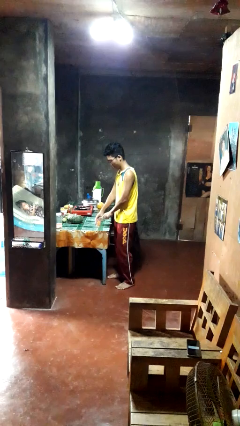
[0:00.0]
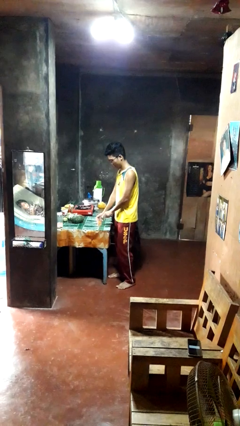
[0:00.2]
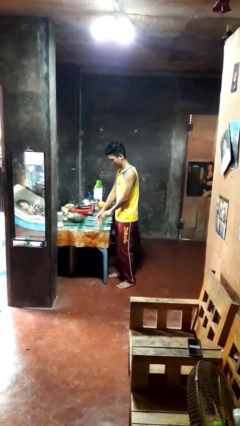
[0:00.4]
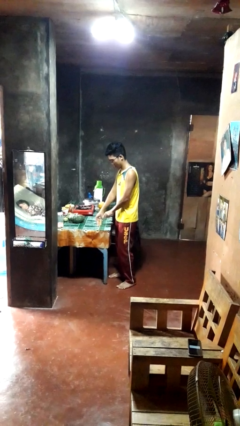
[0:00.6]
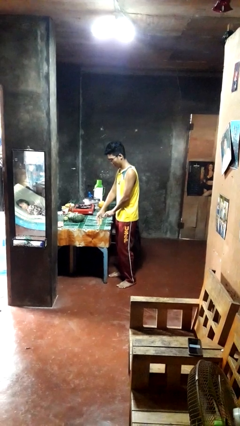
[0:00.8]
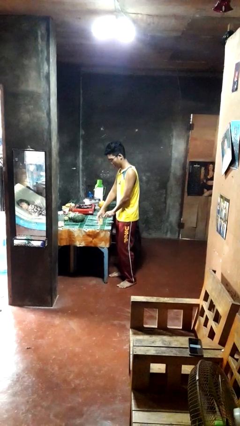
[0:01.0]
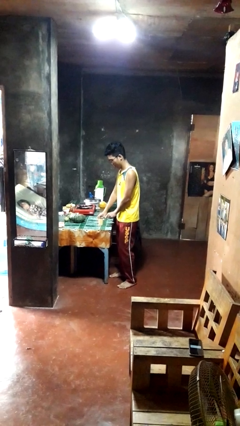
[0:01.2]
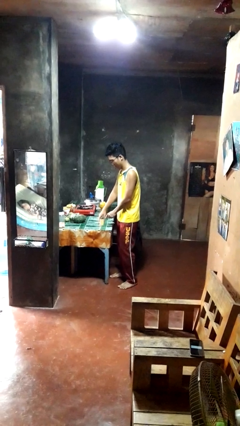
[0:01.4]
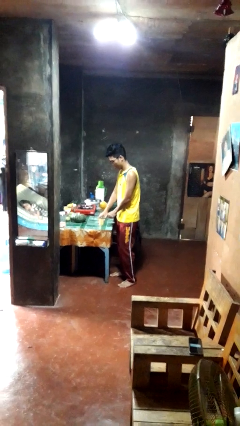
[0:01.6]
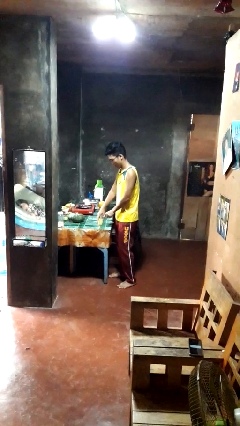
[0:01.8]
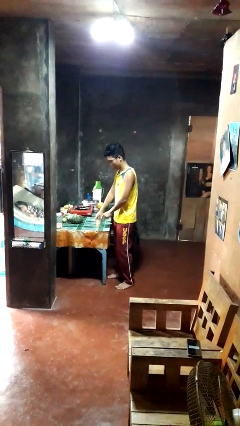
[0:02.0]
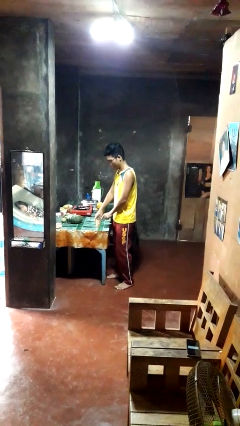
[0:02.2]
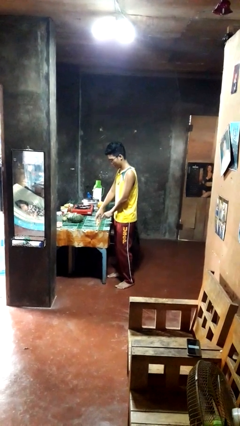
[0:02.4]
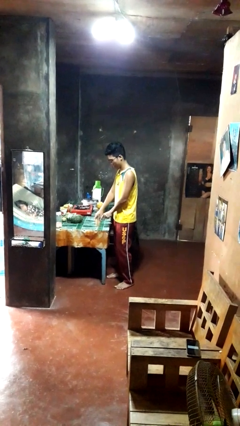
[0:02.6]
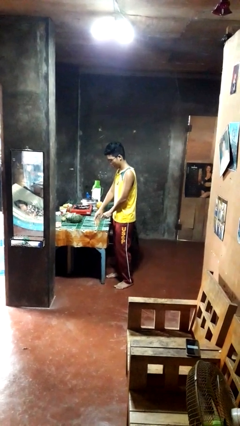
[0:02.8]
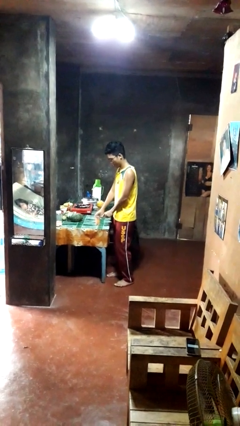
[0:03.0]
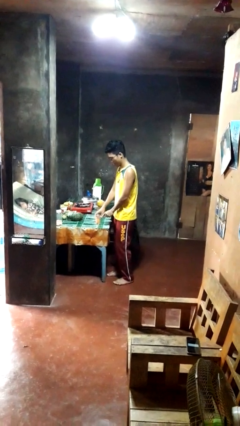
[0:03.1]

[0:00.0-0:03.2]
person opens can with can opener

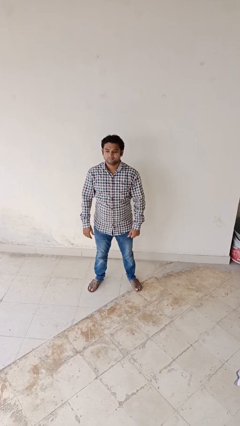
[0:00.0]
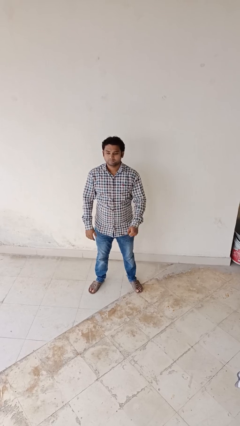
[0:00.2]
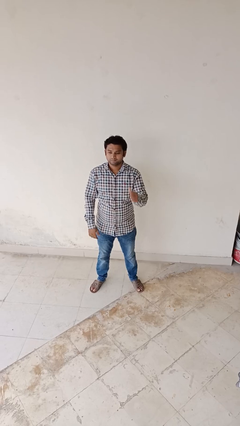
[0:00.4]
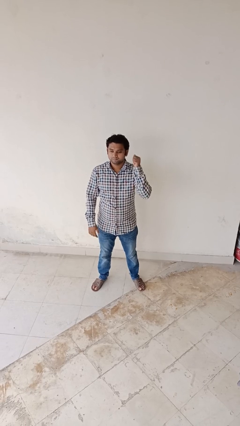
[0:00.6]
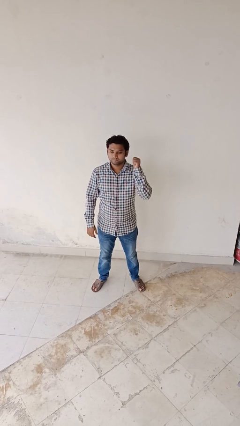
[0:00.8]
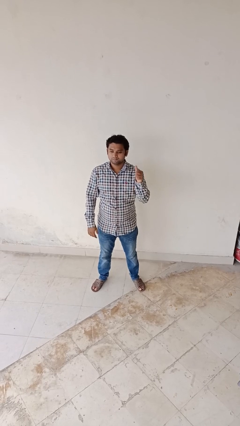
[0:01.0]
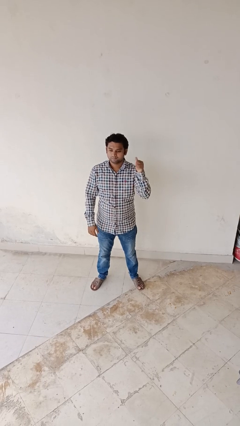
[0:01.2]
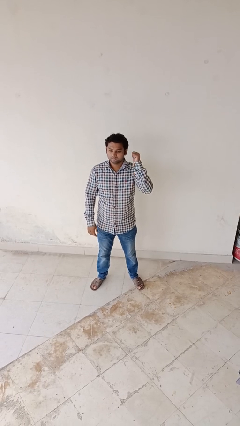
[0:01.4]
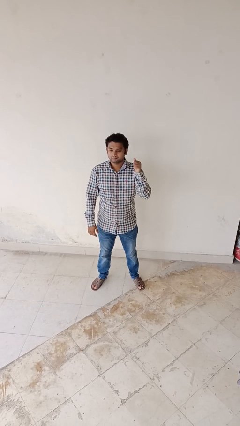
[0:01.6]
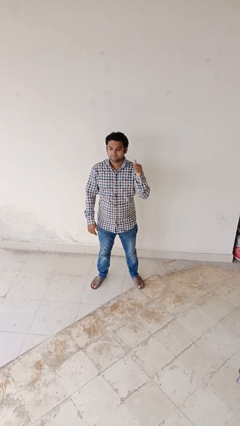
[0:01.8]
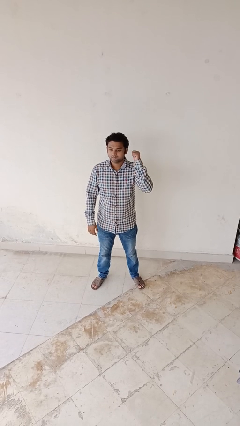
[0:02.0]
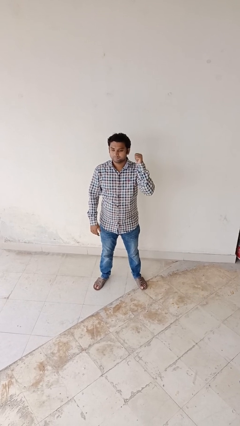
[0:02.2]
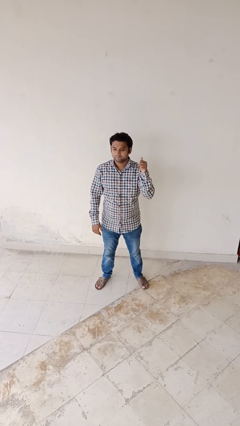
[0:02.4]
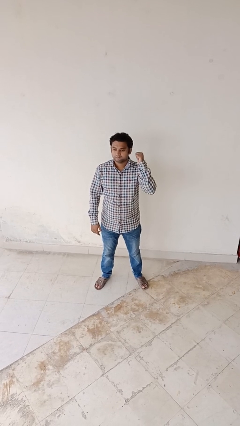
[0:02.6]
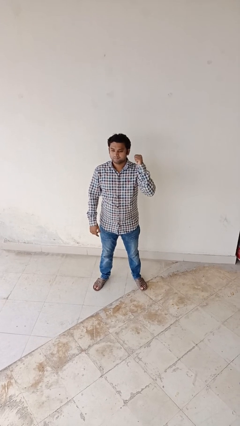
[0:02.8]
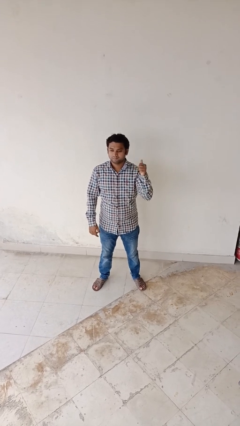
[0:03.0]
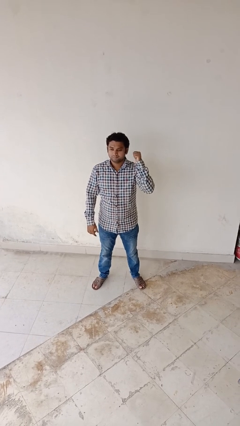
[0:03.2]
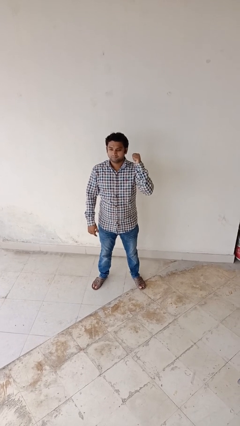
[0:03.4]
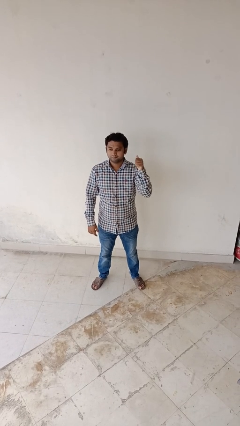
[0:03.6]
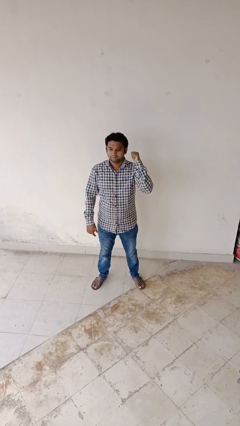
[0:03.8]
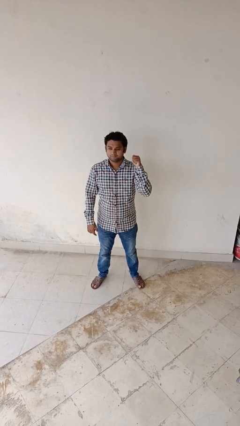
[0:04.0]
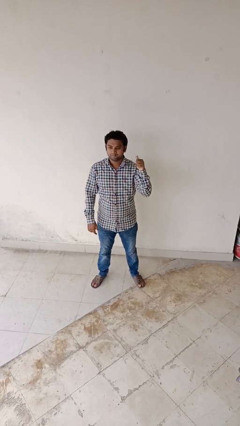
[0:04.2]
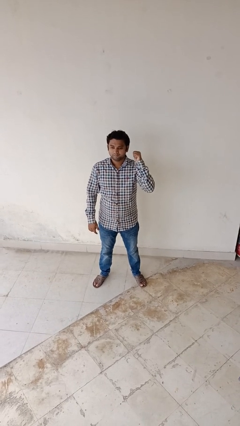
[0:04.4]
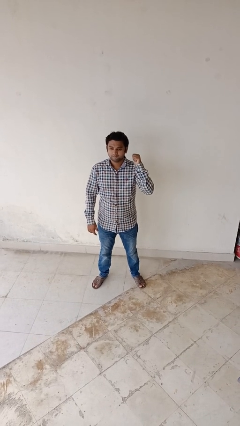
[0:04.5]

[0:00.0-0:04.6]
person gestures behind me

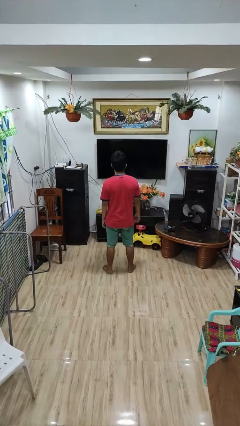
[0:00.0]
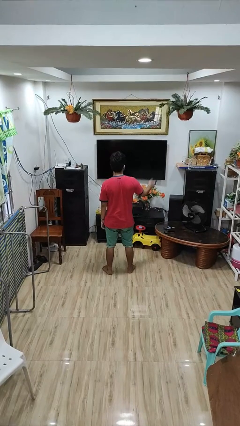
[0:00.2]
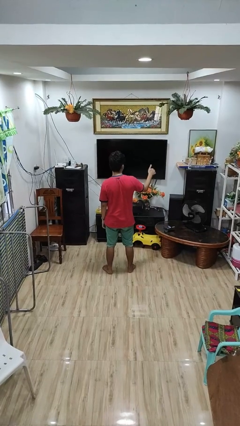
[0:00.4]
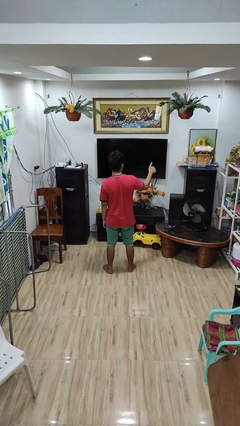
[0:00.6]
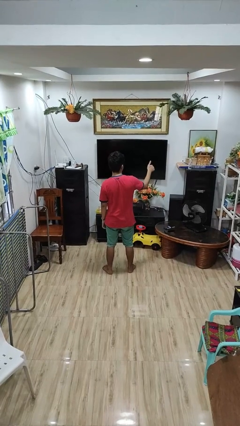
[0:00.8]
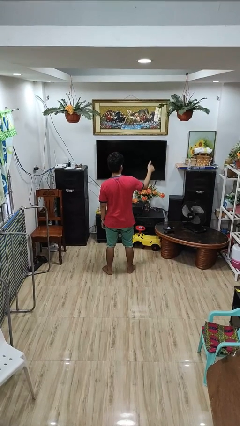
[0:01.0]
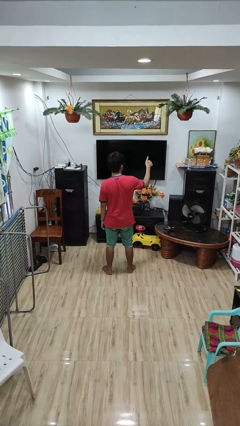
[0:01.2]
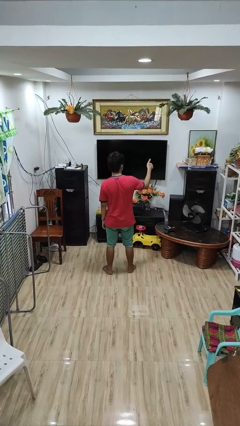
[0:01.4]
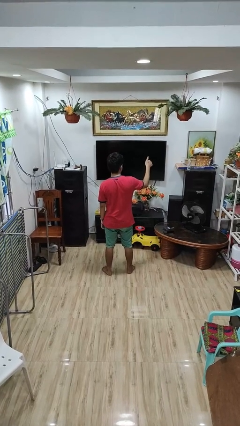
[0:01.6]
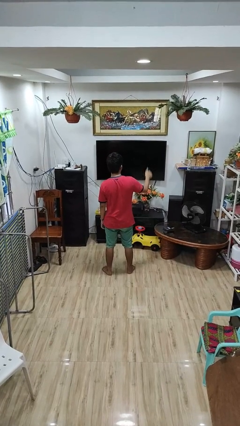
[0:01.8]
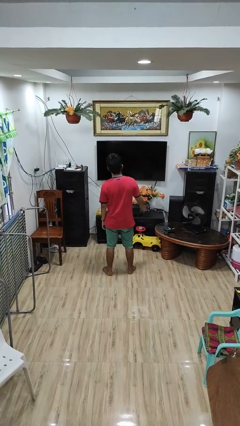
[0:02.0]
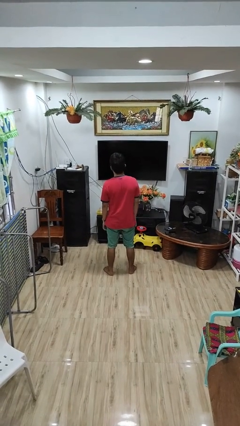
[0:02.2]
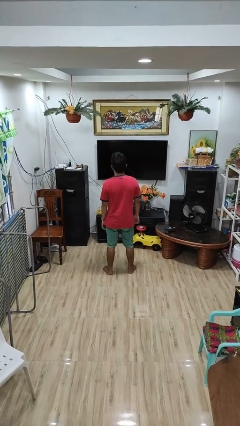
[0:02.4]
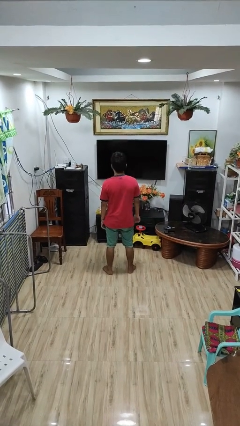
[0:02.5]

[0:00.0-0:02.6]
person gestures thumbs up

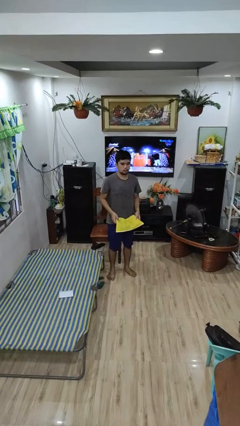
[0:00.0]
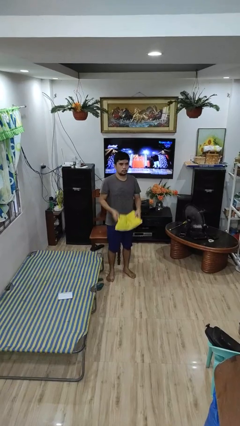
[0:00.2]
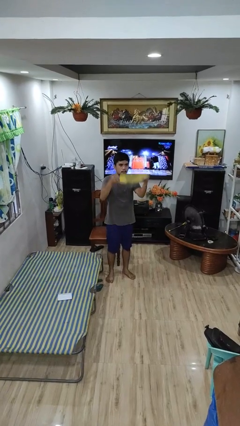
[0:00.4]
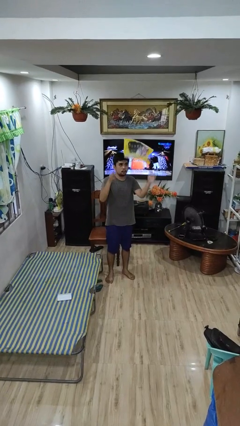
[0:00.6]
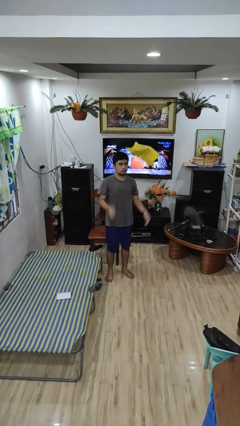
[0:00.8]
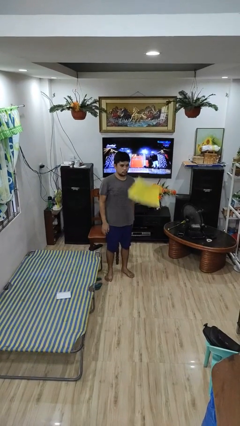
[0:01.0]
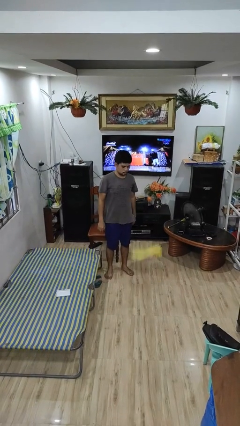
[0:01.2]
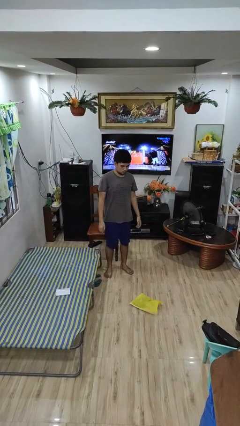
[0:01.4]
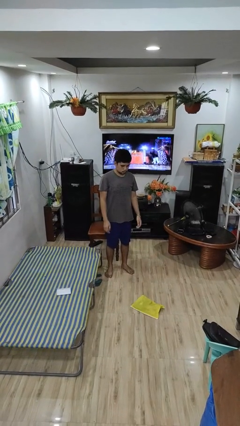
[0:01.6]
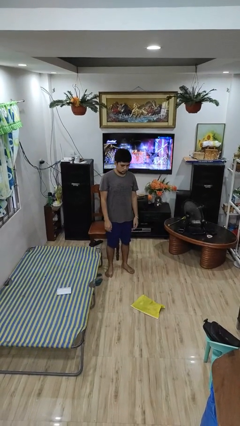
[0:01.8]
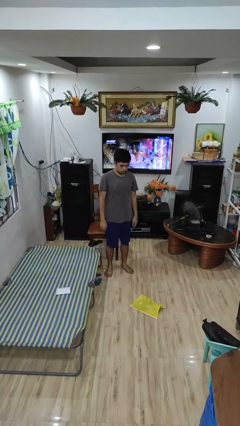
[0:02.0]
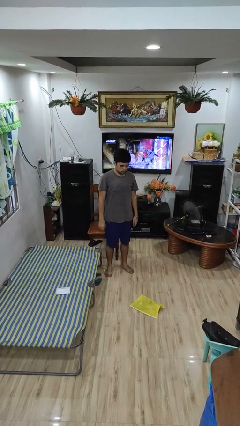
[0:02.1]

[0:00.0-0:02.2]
person throws object into air

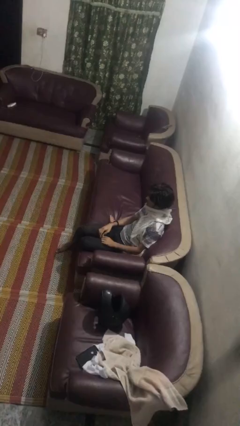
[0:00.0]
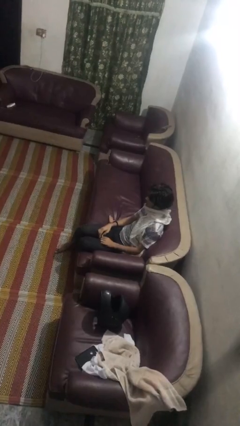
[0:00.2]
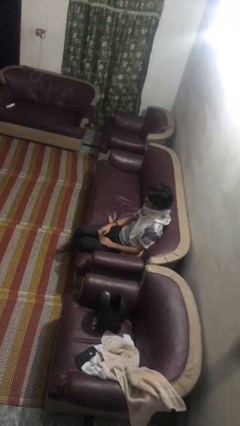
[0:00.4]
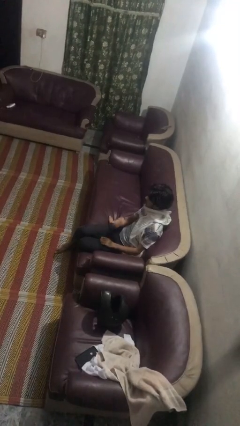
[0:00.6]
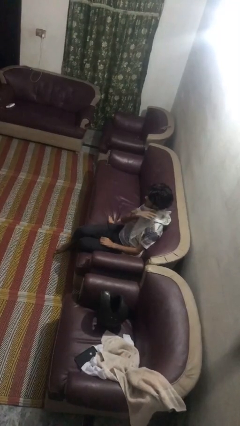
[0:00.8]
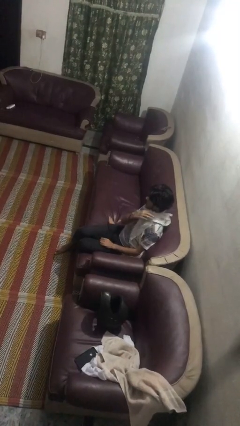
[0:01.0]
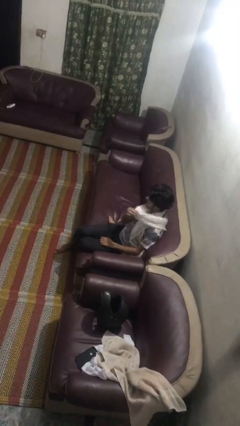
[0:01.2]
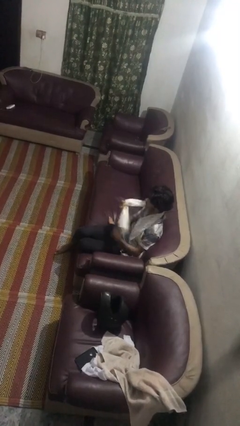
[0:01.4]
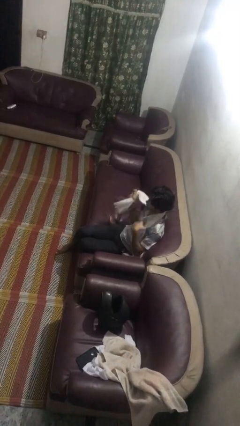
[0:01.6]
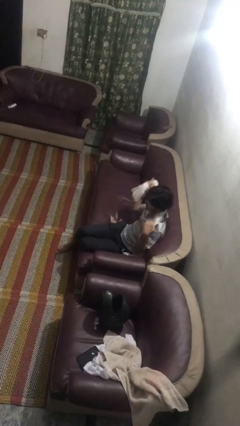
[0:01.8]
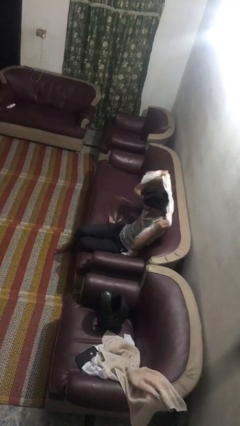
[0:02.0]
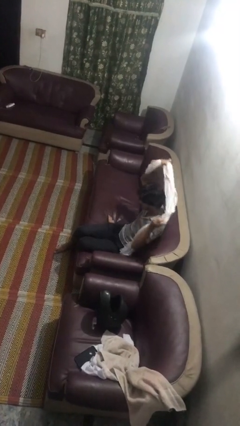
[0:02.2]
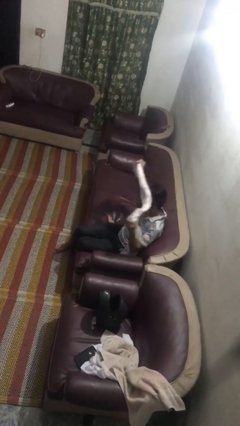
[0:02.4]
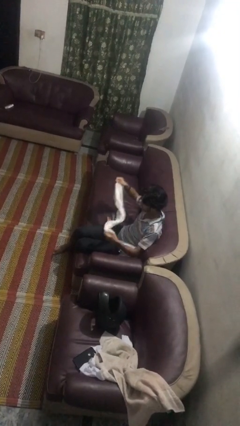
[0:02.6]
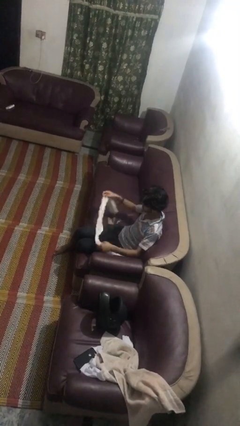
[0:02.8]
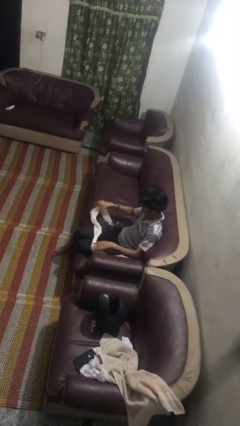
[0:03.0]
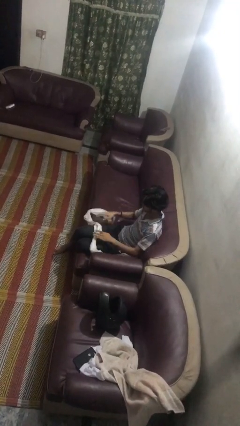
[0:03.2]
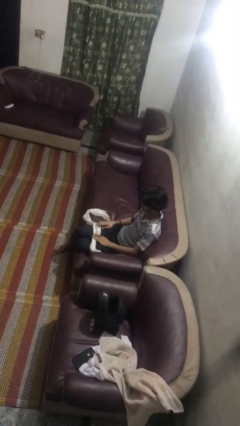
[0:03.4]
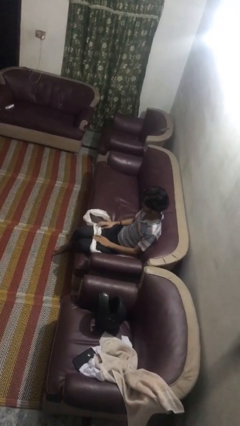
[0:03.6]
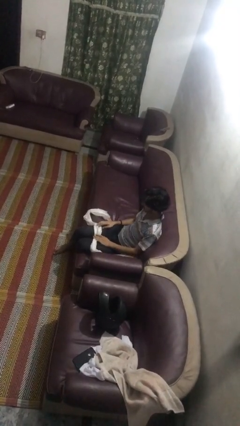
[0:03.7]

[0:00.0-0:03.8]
person takes off scarf

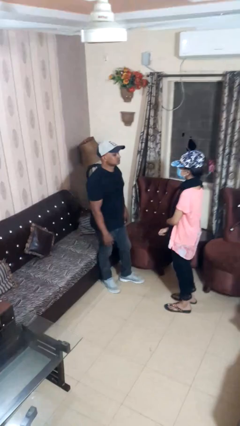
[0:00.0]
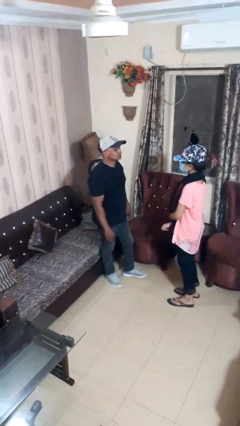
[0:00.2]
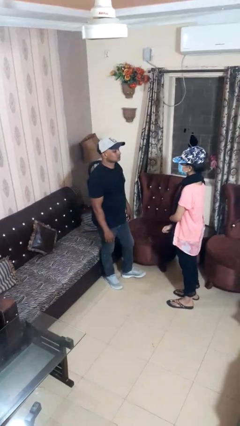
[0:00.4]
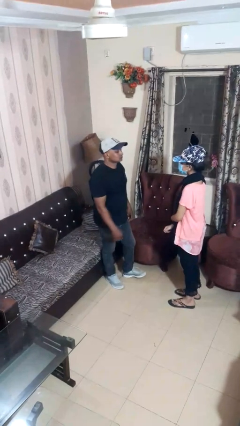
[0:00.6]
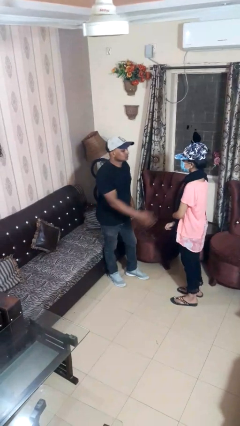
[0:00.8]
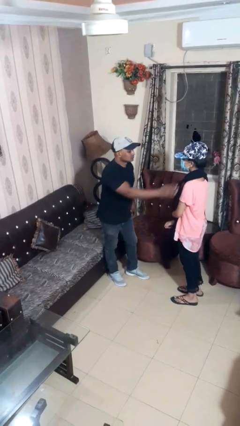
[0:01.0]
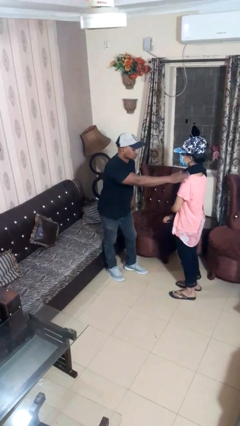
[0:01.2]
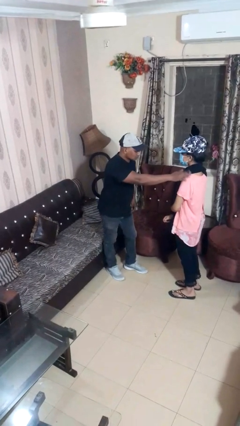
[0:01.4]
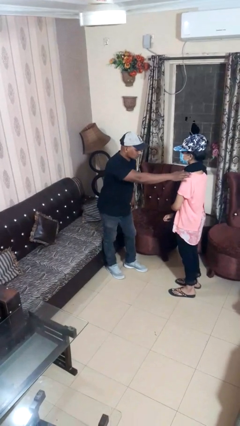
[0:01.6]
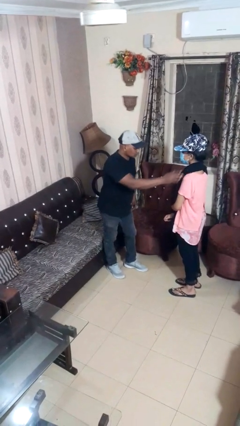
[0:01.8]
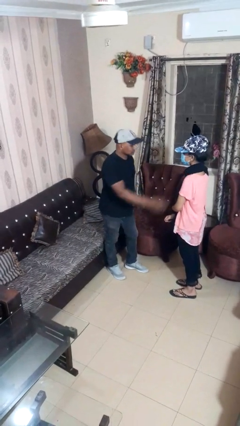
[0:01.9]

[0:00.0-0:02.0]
person pounds shoulders of person
